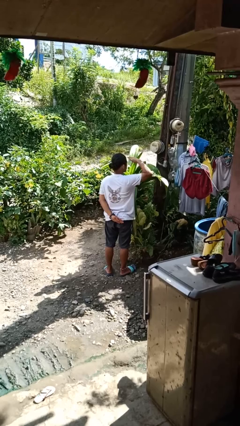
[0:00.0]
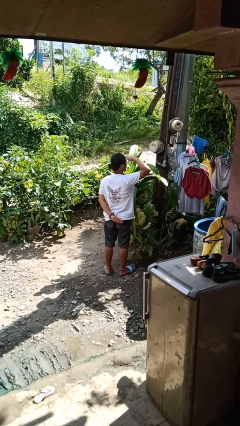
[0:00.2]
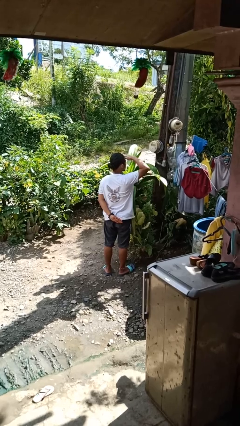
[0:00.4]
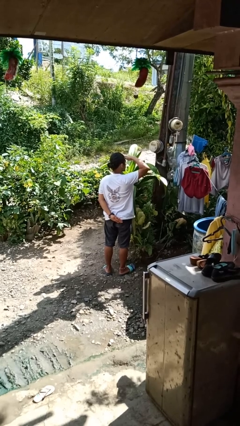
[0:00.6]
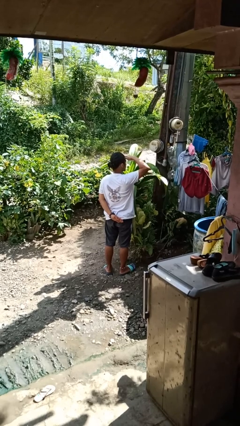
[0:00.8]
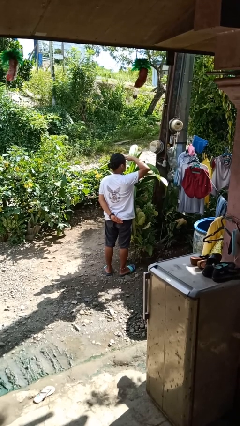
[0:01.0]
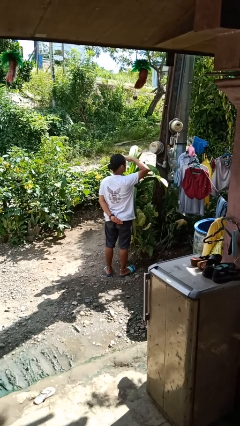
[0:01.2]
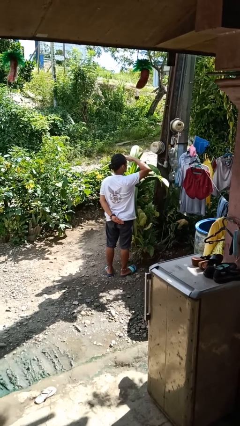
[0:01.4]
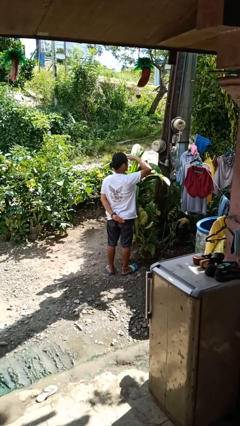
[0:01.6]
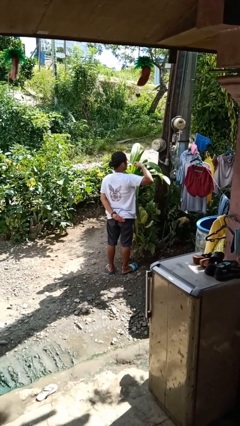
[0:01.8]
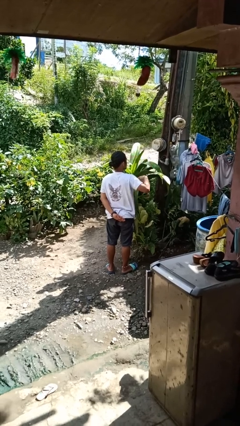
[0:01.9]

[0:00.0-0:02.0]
person shades eyes

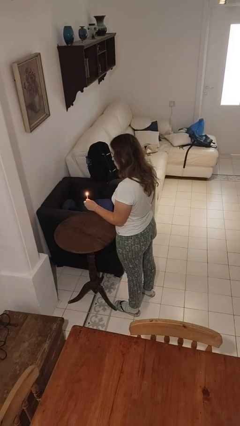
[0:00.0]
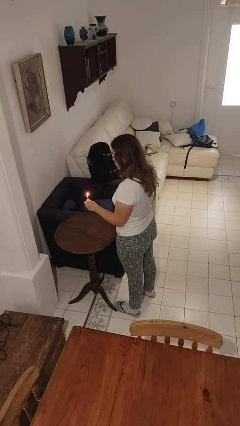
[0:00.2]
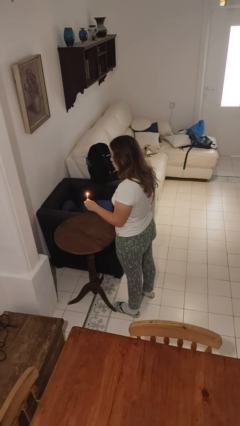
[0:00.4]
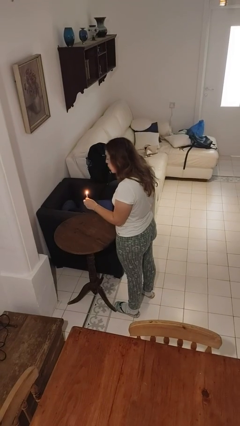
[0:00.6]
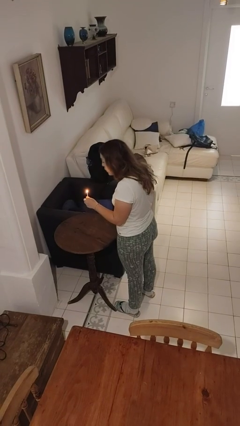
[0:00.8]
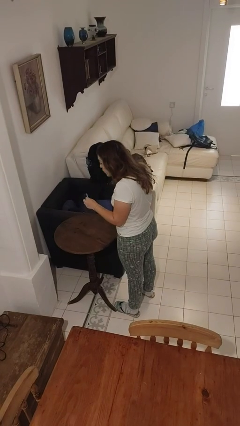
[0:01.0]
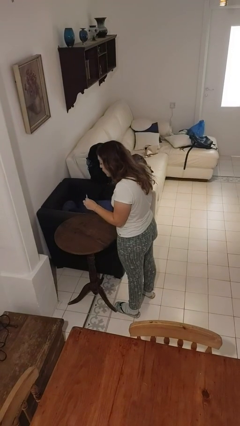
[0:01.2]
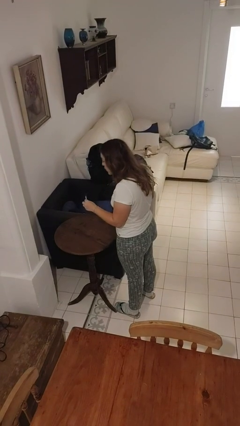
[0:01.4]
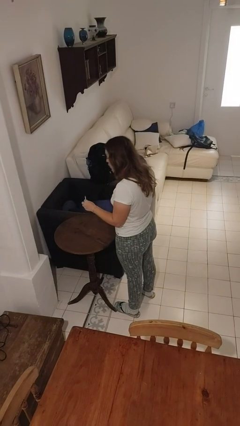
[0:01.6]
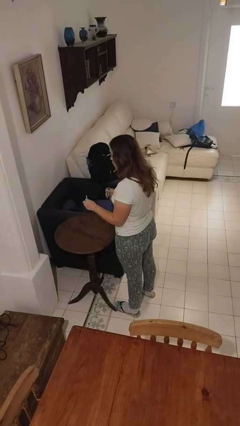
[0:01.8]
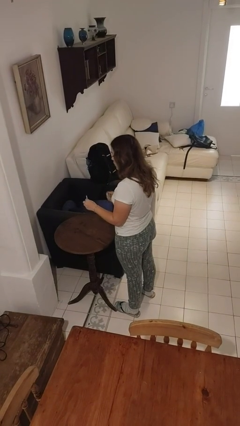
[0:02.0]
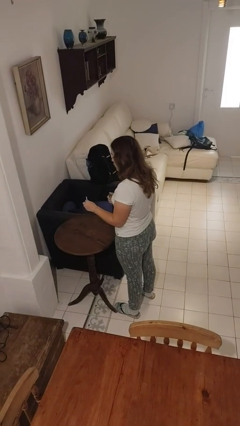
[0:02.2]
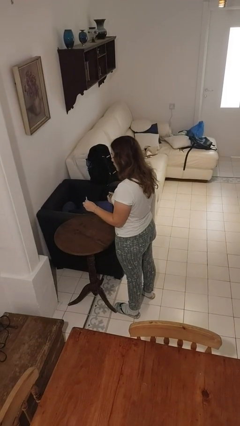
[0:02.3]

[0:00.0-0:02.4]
person extinguishes candle

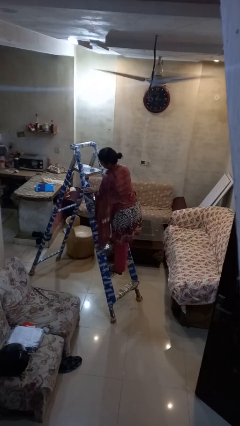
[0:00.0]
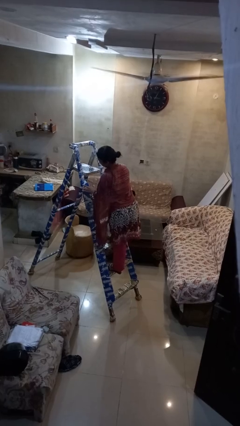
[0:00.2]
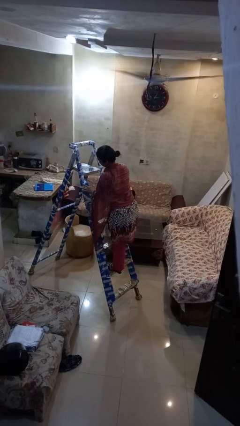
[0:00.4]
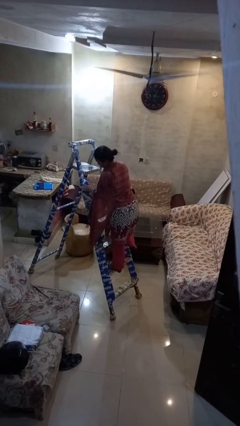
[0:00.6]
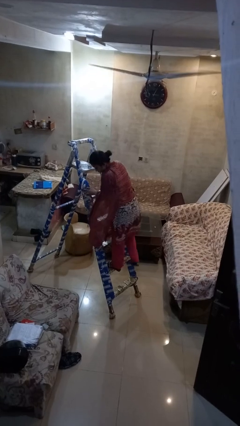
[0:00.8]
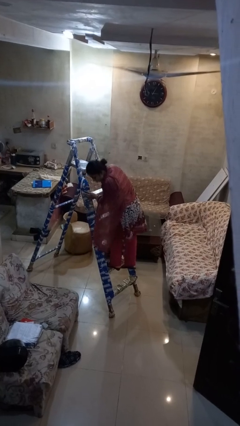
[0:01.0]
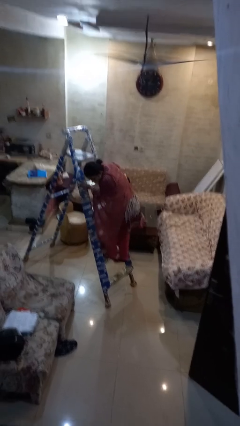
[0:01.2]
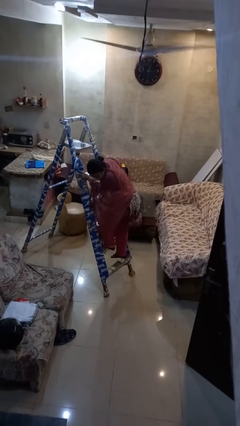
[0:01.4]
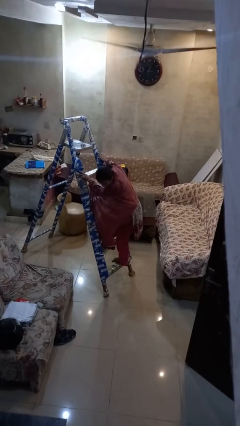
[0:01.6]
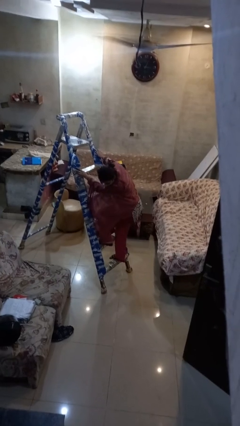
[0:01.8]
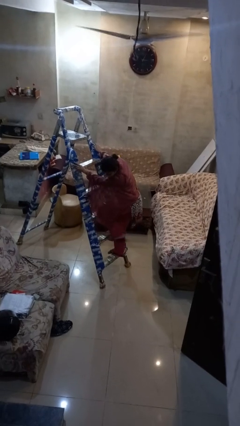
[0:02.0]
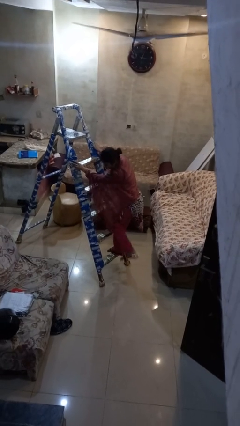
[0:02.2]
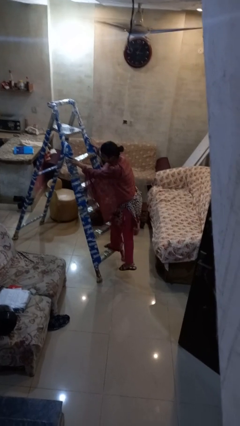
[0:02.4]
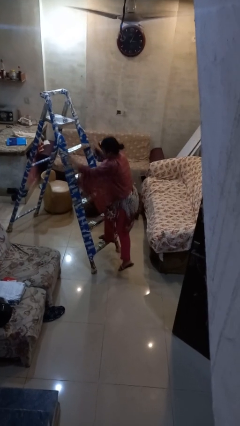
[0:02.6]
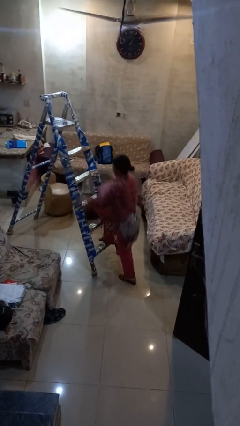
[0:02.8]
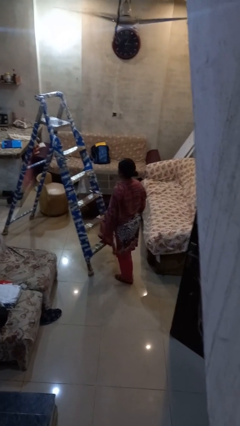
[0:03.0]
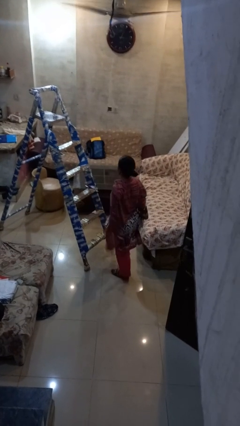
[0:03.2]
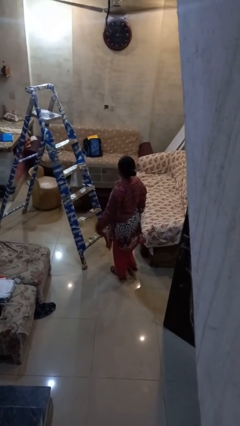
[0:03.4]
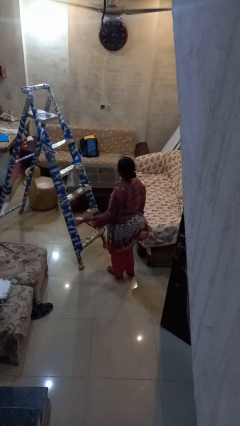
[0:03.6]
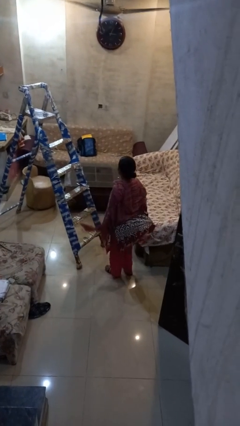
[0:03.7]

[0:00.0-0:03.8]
person climbs down ladder

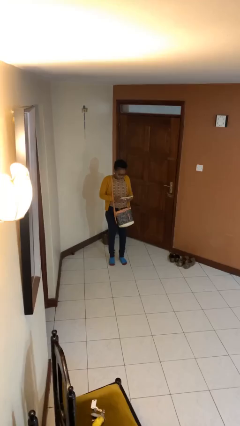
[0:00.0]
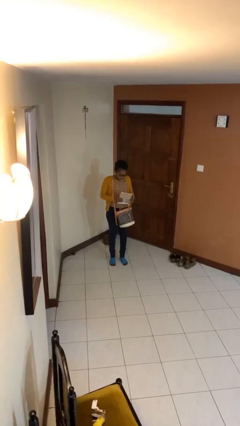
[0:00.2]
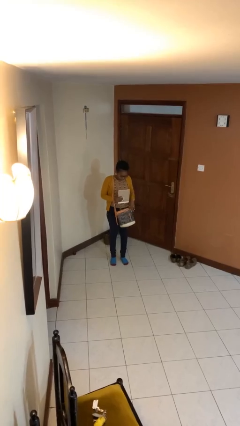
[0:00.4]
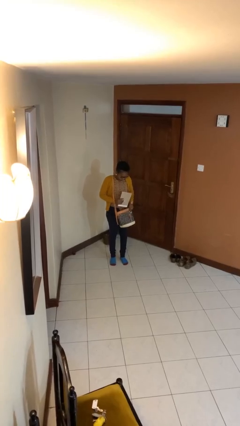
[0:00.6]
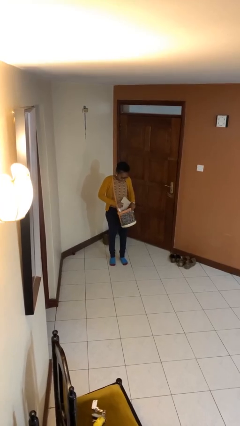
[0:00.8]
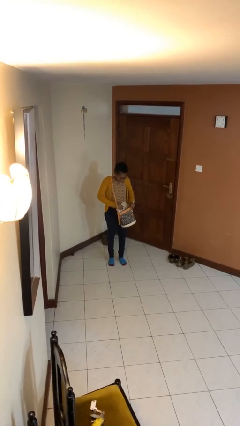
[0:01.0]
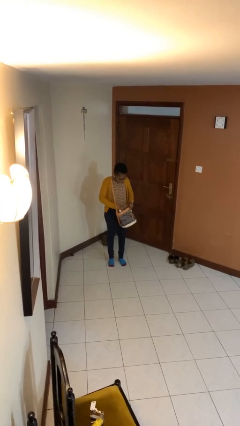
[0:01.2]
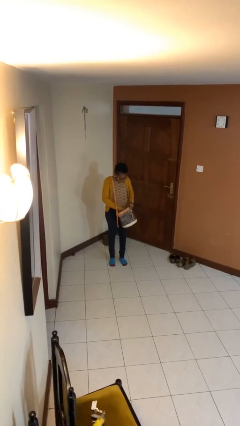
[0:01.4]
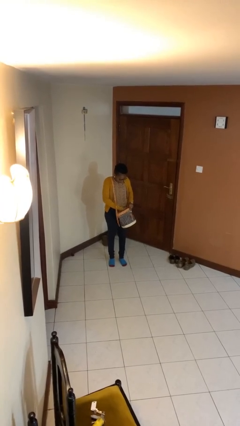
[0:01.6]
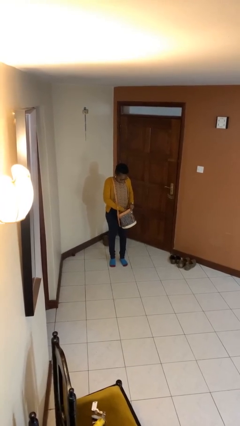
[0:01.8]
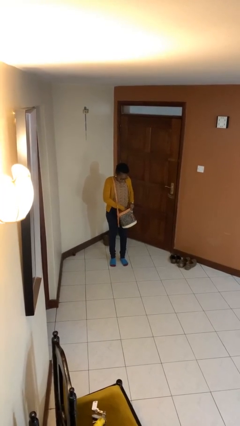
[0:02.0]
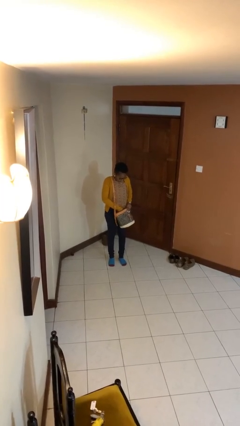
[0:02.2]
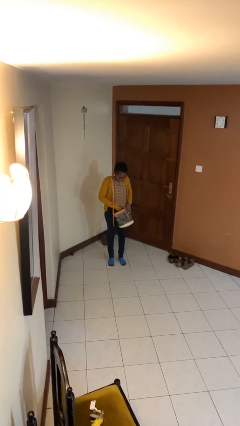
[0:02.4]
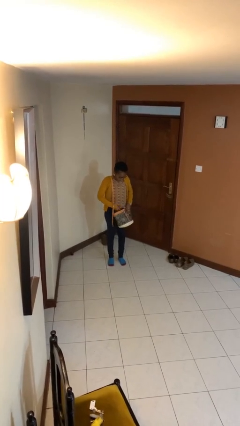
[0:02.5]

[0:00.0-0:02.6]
person puts object into purse

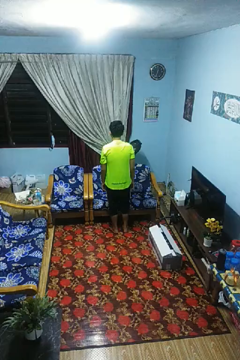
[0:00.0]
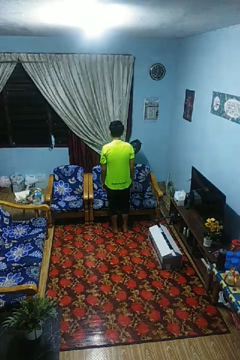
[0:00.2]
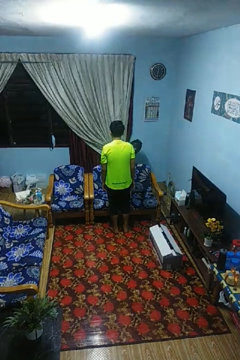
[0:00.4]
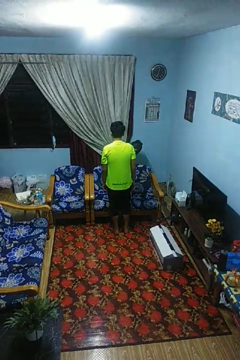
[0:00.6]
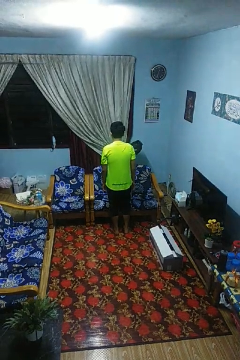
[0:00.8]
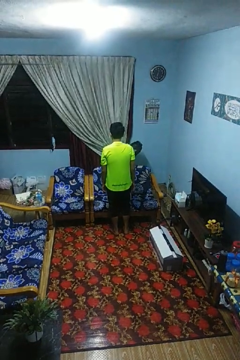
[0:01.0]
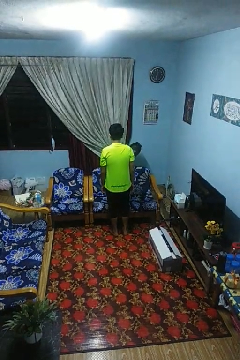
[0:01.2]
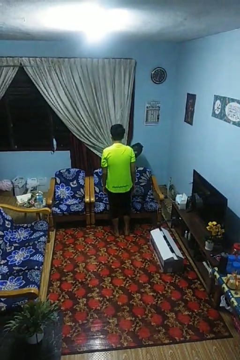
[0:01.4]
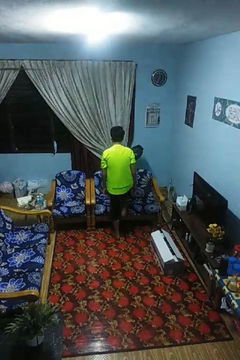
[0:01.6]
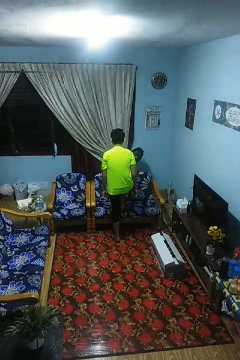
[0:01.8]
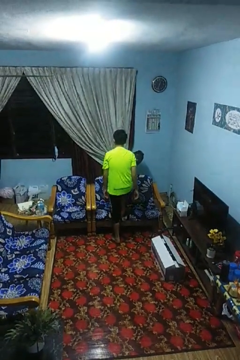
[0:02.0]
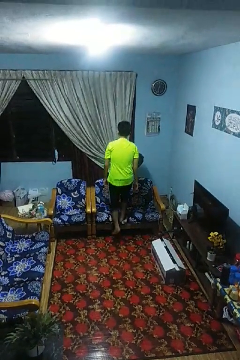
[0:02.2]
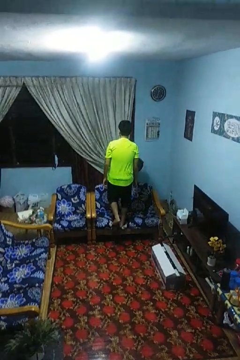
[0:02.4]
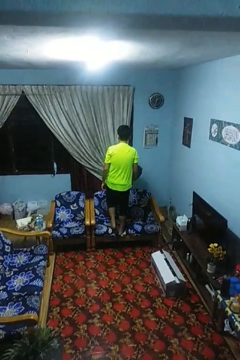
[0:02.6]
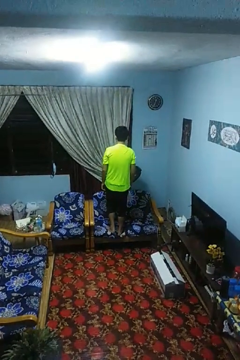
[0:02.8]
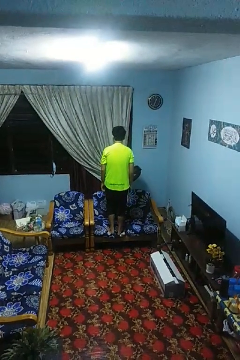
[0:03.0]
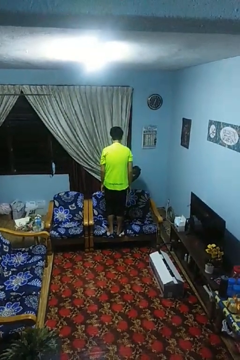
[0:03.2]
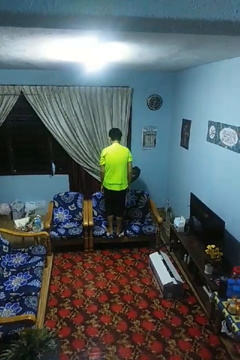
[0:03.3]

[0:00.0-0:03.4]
person climbs on couch

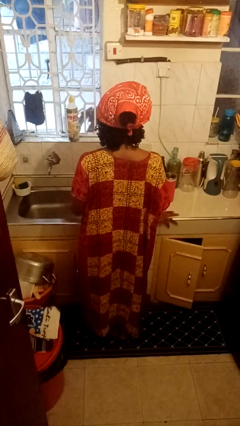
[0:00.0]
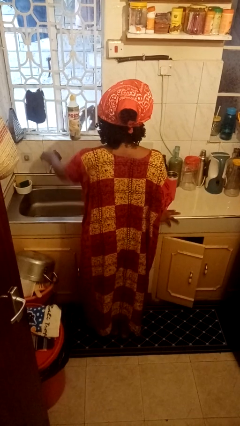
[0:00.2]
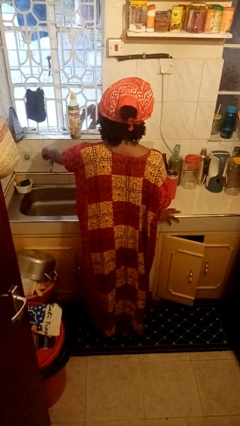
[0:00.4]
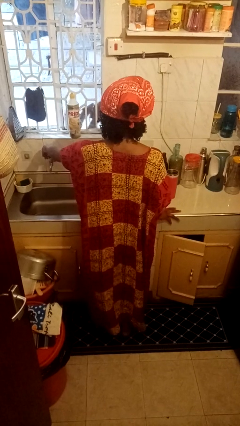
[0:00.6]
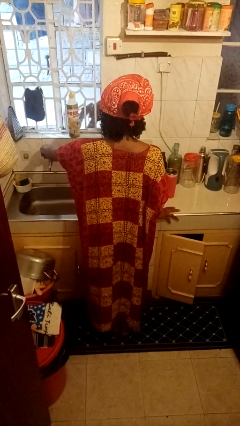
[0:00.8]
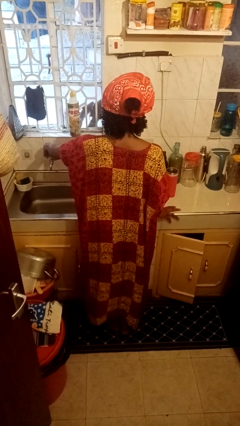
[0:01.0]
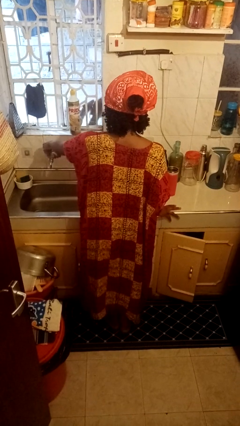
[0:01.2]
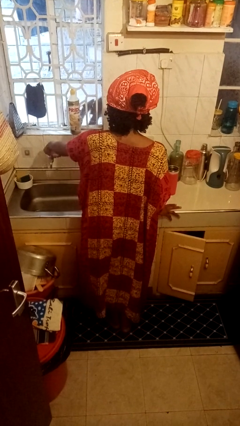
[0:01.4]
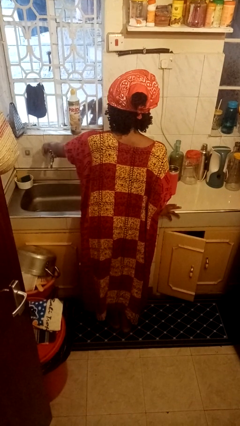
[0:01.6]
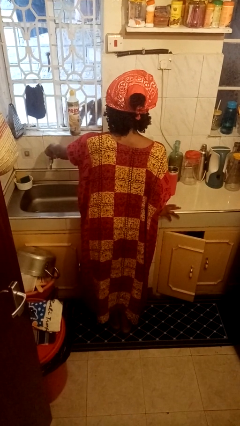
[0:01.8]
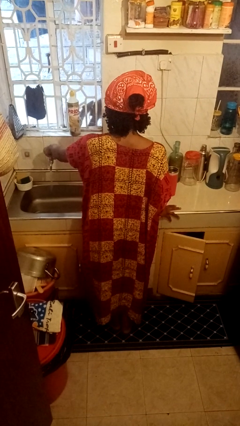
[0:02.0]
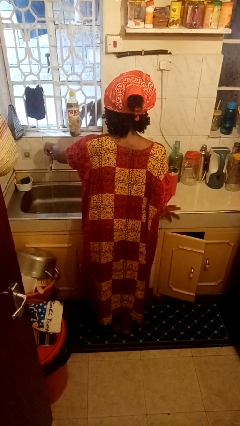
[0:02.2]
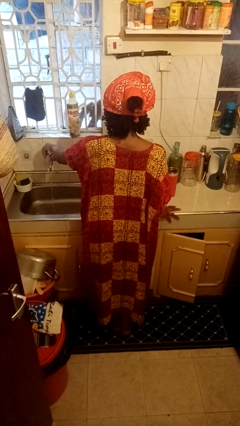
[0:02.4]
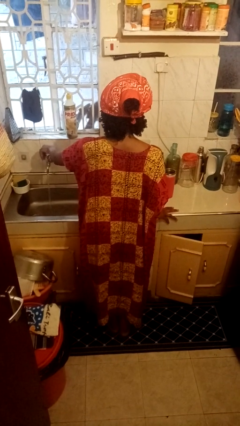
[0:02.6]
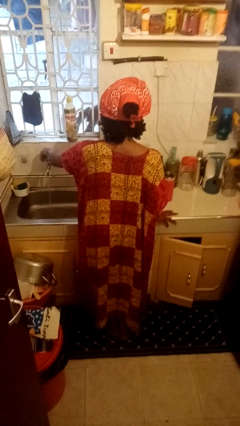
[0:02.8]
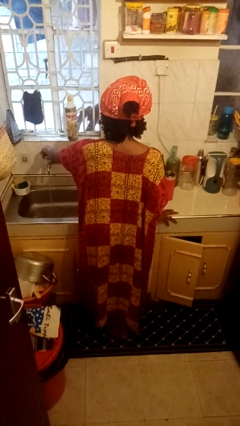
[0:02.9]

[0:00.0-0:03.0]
person turns on faucet

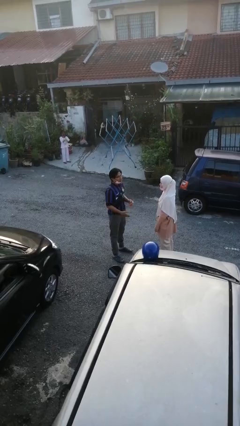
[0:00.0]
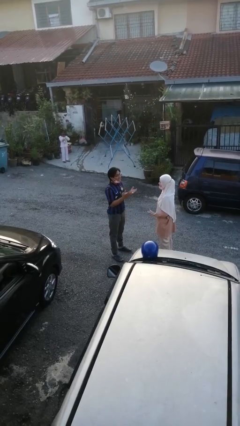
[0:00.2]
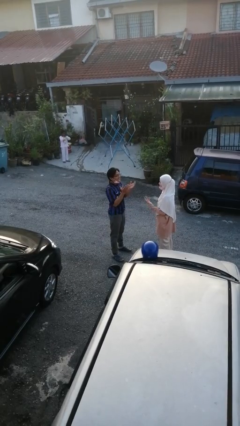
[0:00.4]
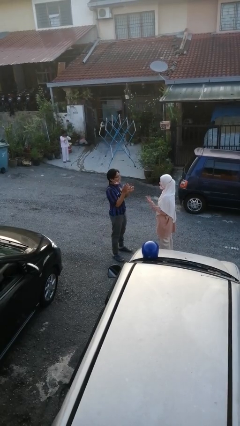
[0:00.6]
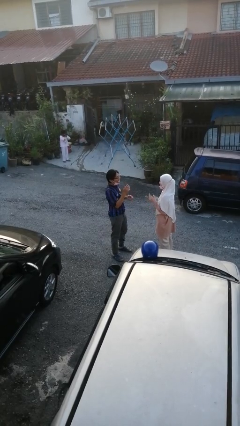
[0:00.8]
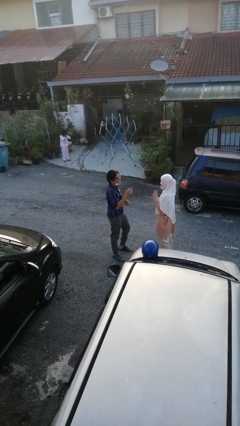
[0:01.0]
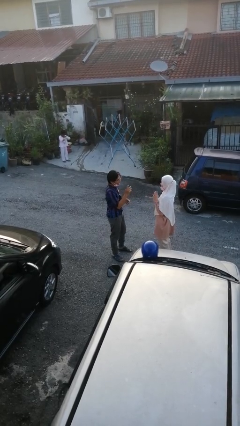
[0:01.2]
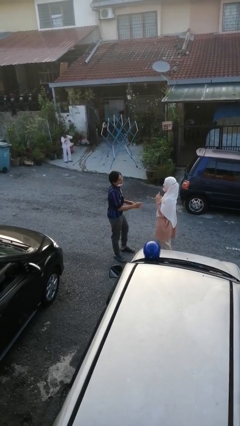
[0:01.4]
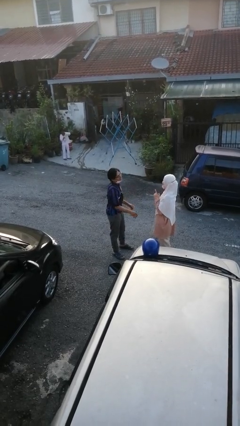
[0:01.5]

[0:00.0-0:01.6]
person laughs with person
